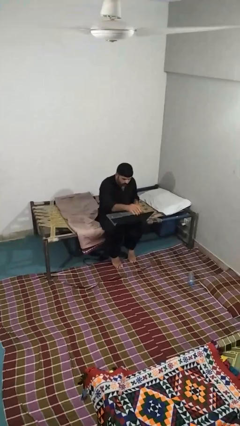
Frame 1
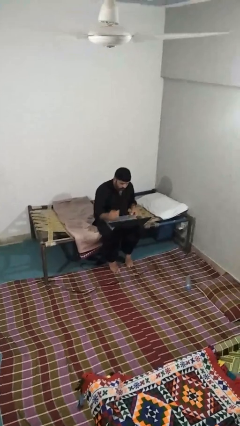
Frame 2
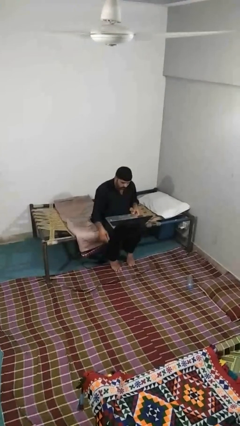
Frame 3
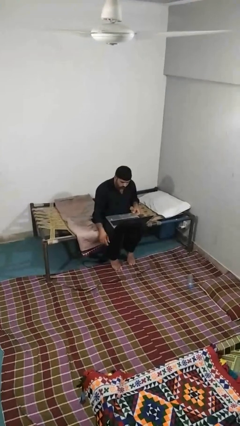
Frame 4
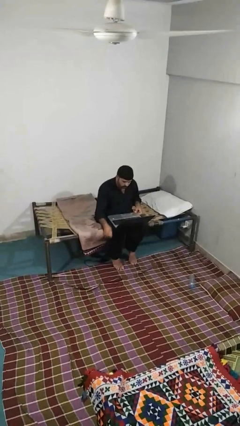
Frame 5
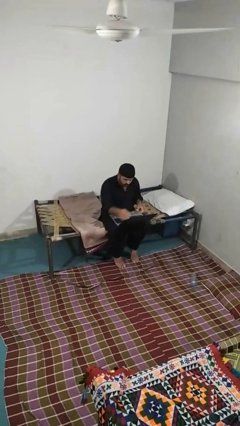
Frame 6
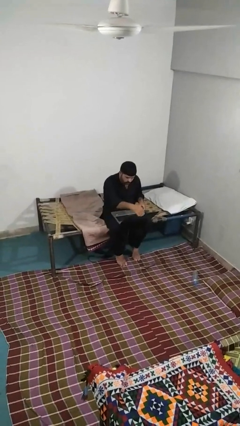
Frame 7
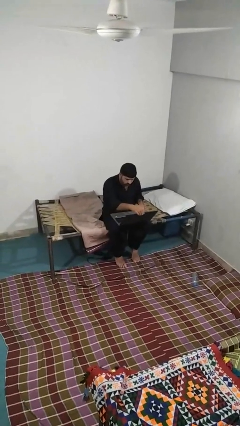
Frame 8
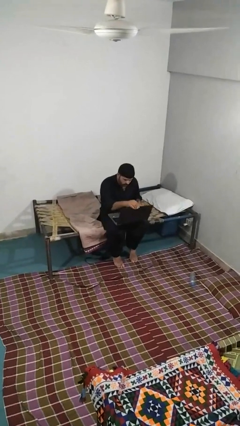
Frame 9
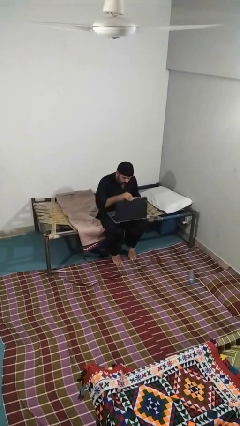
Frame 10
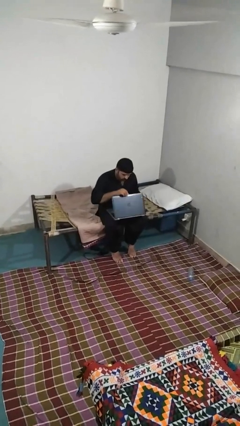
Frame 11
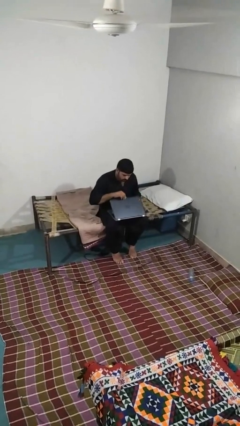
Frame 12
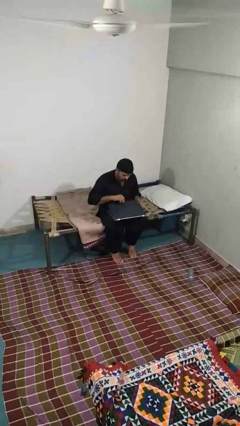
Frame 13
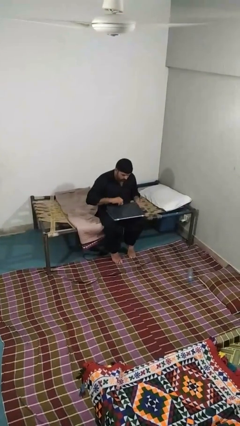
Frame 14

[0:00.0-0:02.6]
person closes laptop

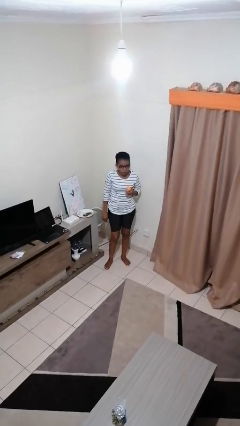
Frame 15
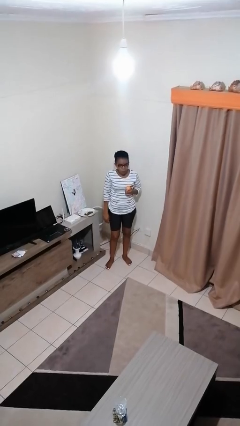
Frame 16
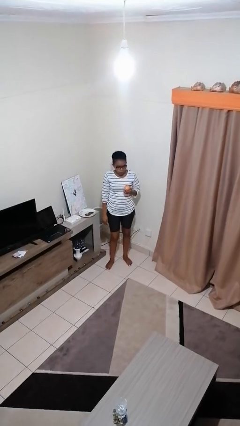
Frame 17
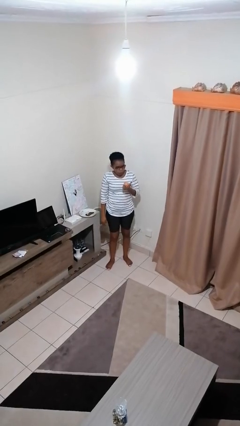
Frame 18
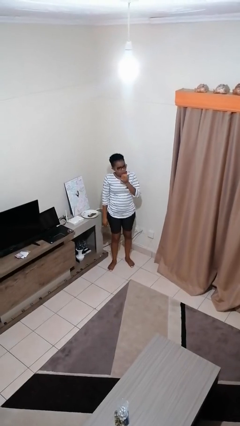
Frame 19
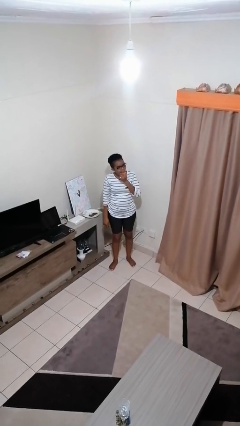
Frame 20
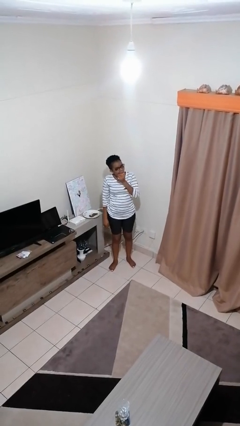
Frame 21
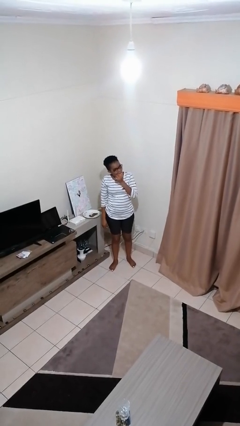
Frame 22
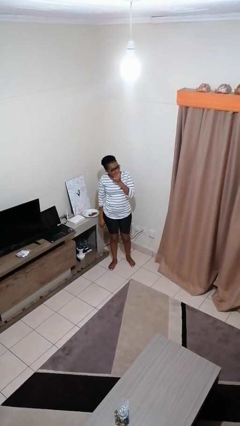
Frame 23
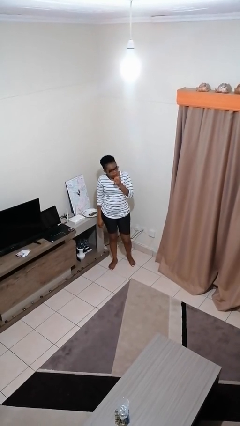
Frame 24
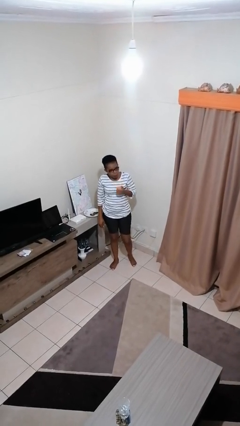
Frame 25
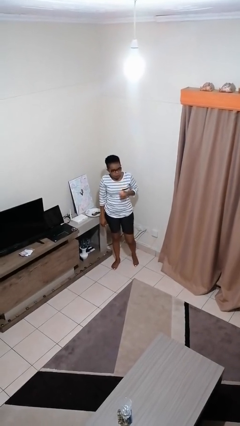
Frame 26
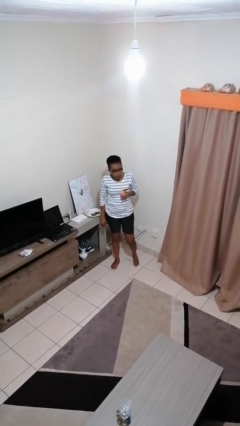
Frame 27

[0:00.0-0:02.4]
person eats apple

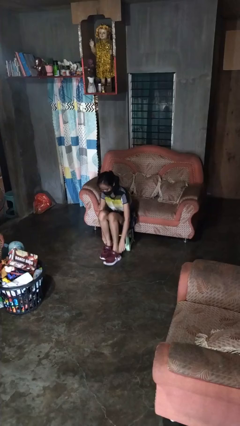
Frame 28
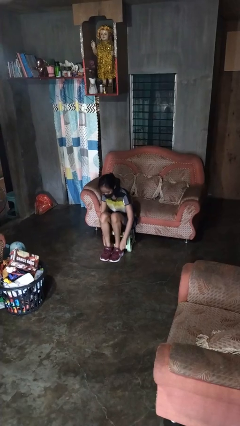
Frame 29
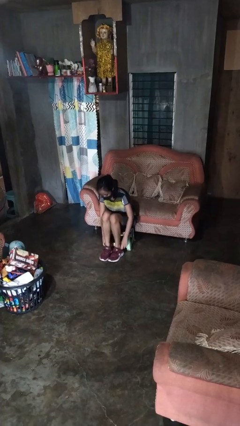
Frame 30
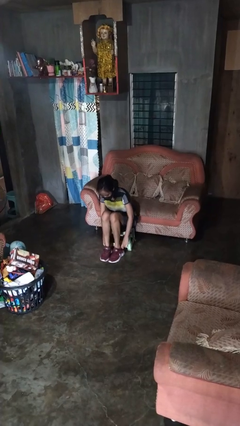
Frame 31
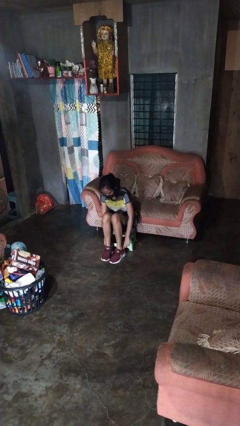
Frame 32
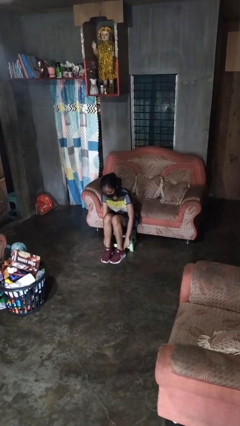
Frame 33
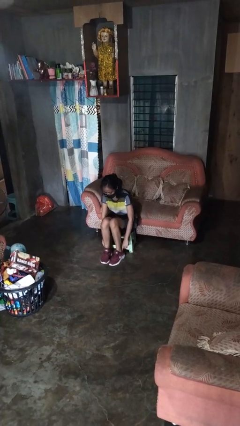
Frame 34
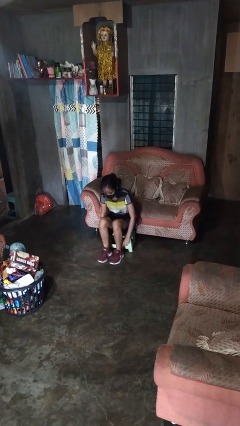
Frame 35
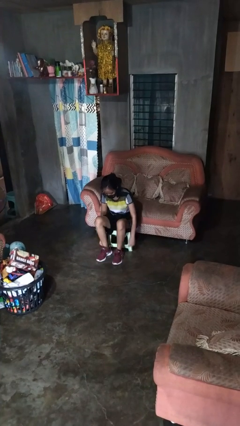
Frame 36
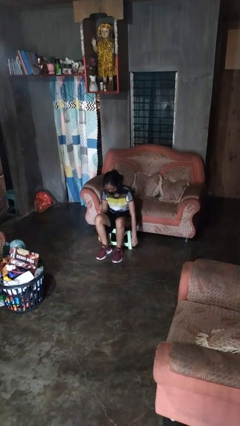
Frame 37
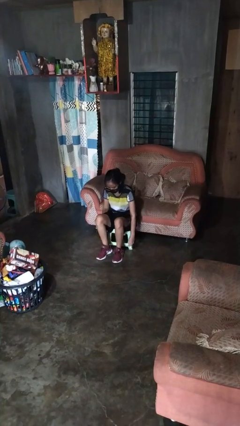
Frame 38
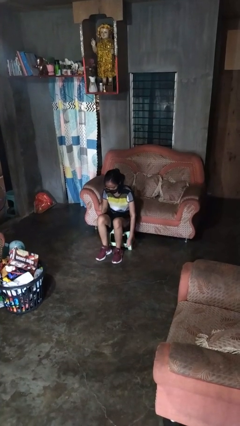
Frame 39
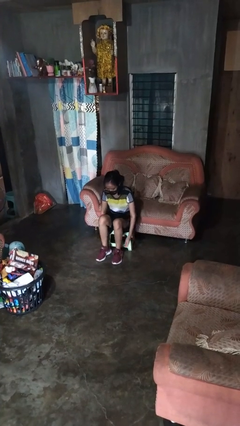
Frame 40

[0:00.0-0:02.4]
person takes off shoes

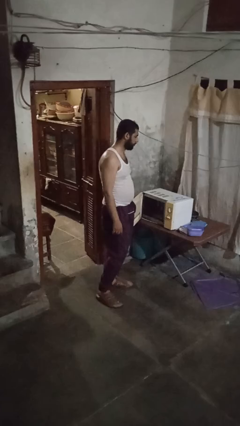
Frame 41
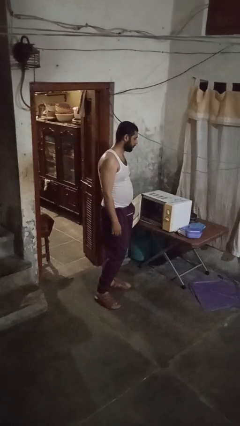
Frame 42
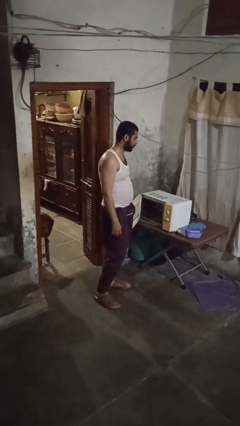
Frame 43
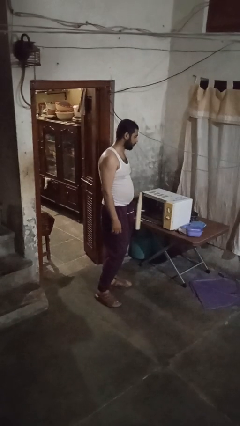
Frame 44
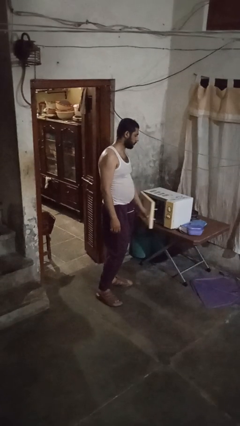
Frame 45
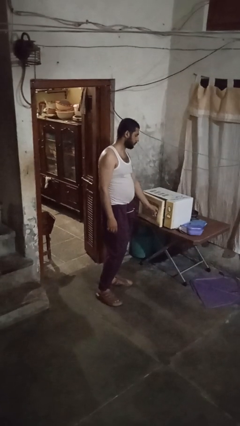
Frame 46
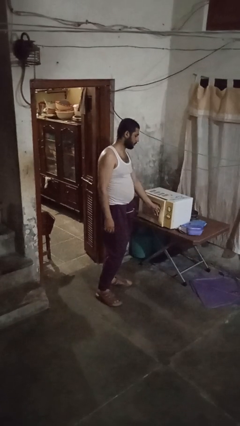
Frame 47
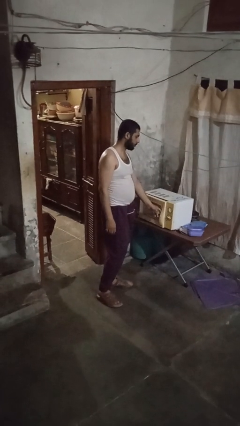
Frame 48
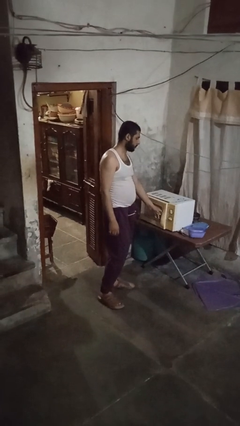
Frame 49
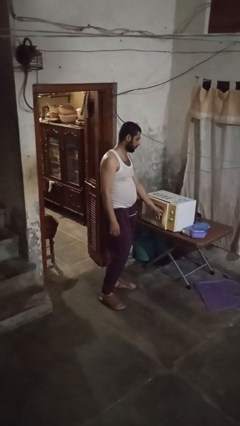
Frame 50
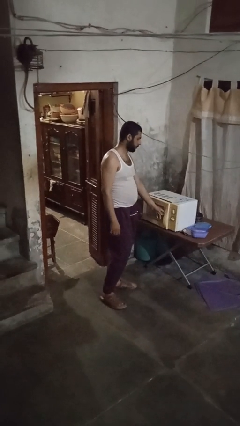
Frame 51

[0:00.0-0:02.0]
person closes microwave

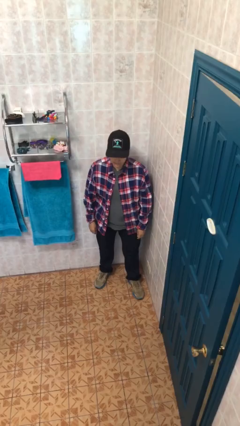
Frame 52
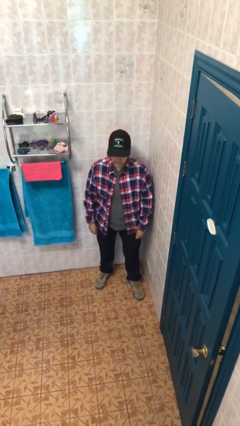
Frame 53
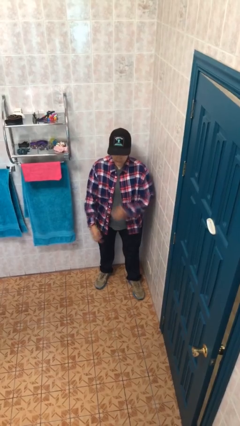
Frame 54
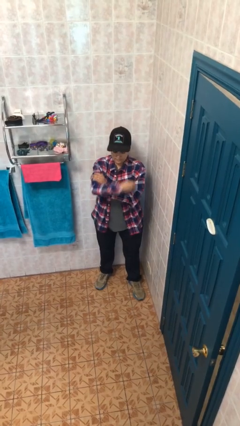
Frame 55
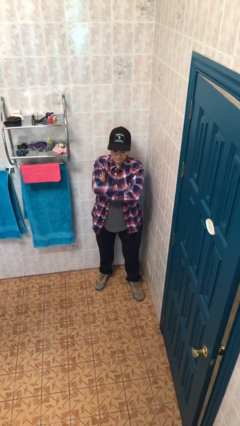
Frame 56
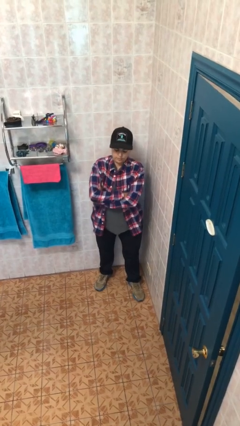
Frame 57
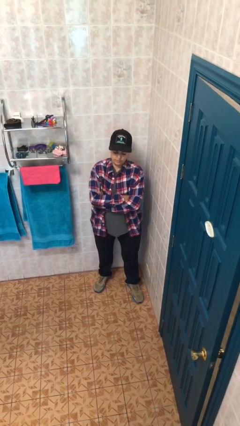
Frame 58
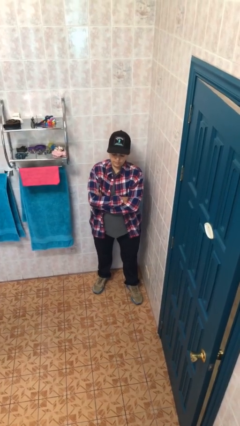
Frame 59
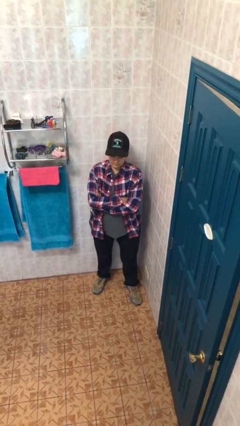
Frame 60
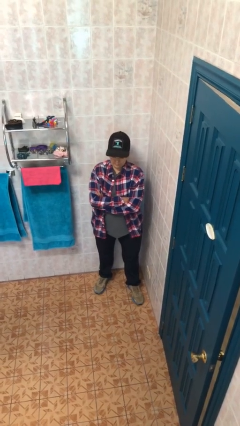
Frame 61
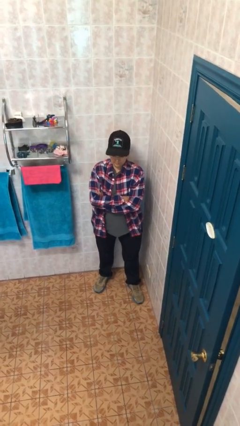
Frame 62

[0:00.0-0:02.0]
person crosses arms

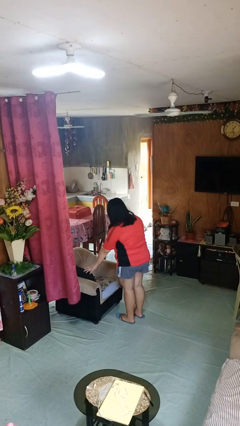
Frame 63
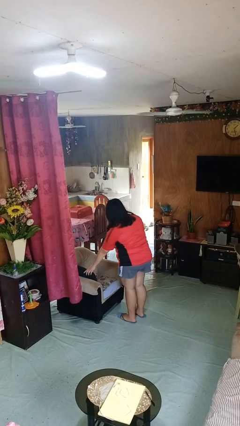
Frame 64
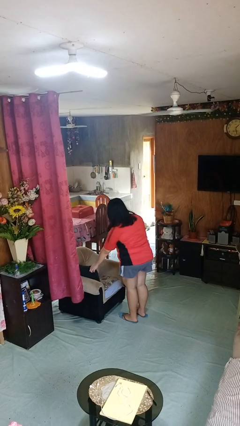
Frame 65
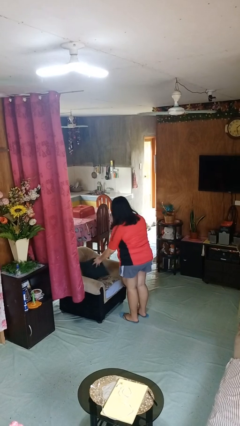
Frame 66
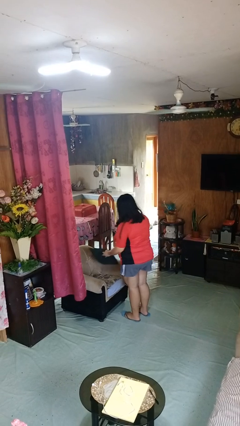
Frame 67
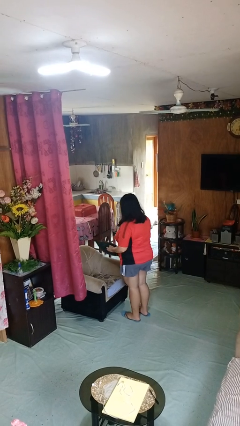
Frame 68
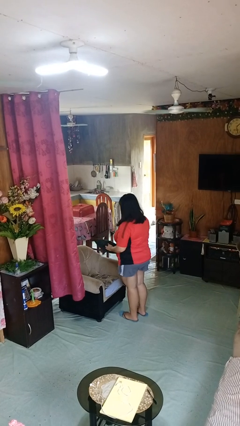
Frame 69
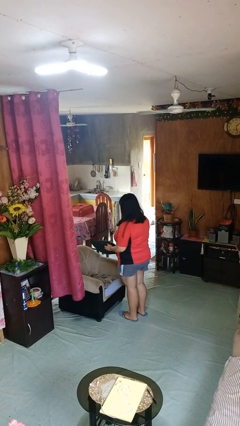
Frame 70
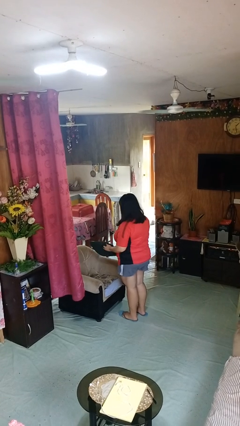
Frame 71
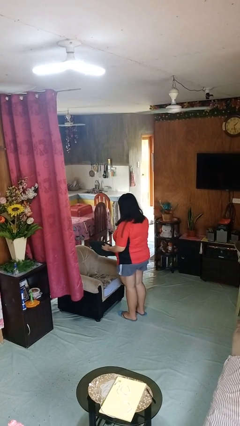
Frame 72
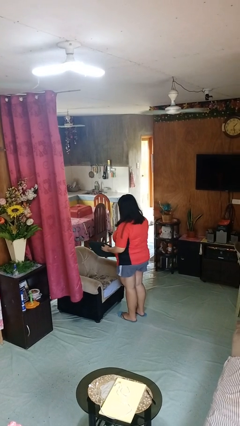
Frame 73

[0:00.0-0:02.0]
person picks up object from couch

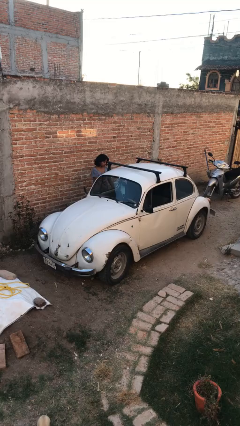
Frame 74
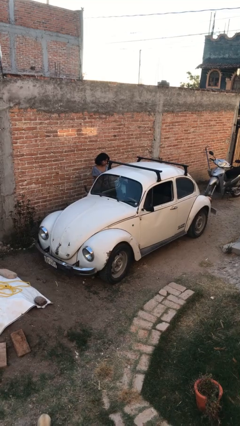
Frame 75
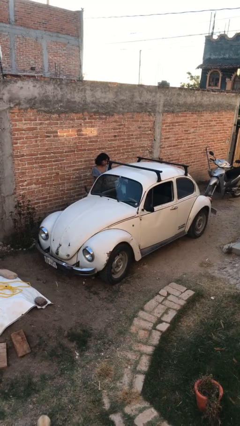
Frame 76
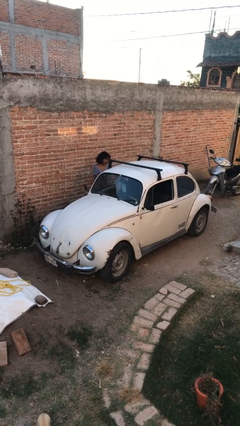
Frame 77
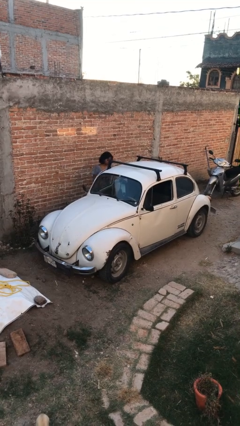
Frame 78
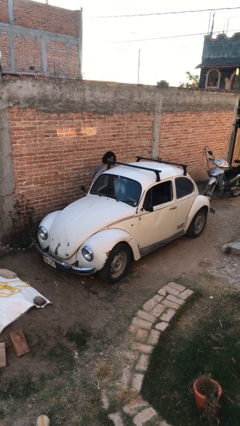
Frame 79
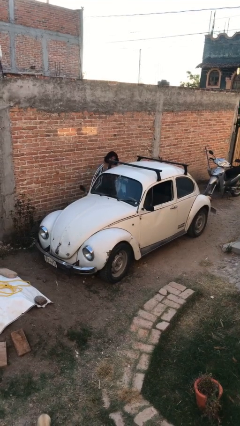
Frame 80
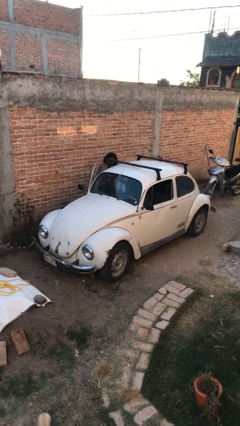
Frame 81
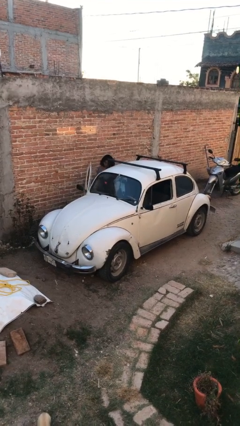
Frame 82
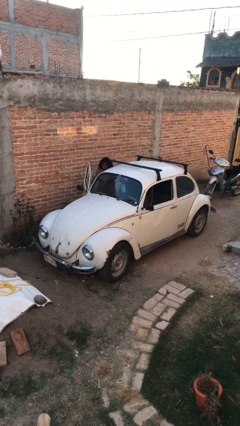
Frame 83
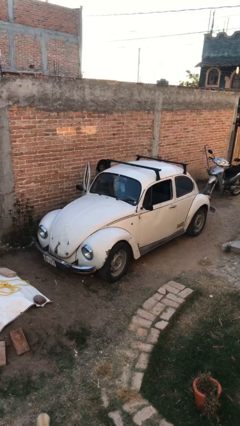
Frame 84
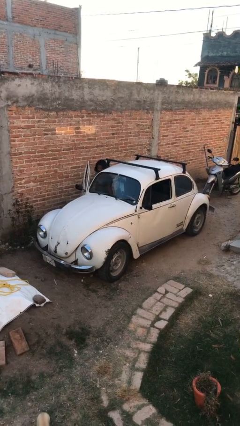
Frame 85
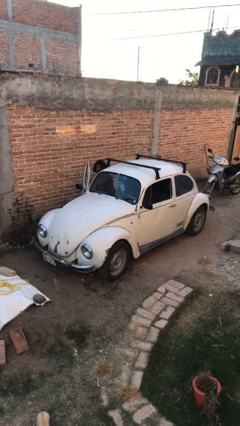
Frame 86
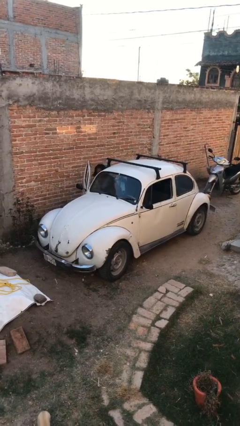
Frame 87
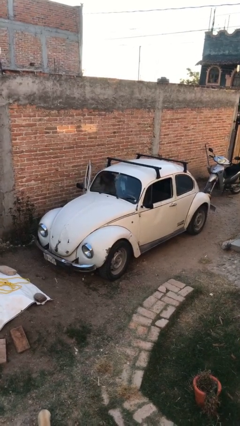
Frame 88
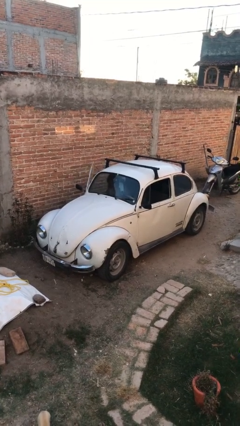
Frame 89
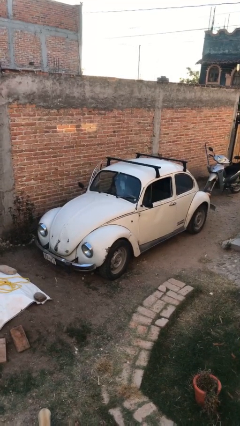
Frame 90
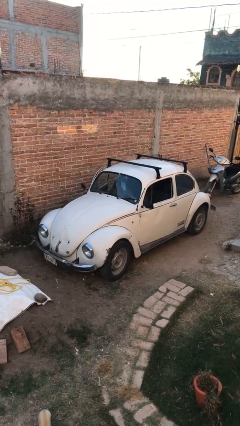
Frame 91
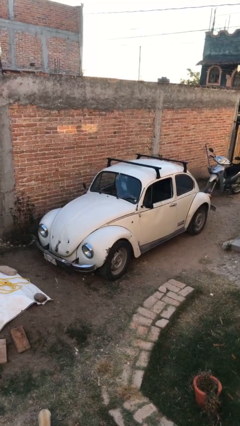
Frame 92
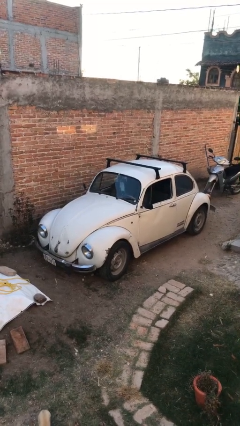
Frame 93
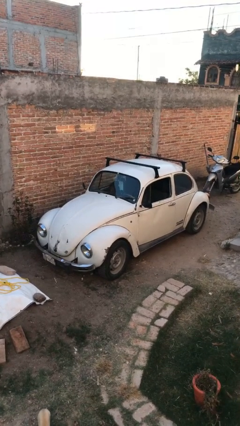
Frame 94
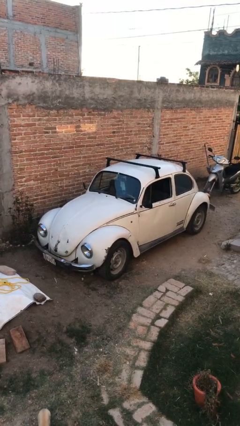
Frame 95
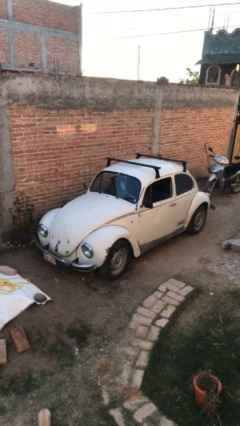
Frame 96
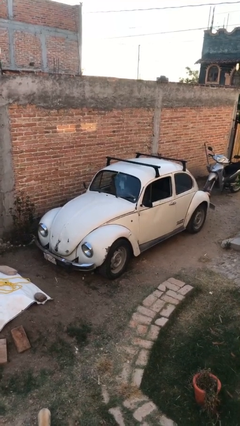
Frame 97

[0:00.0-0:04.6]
car picks up person
